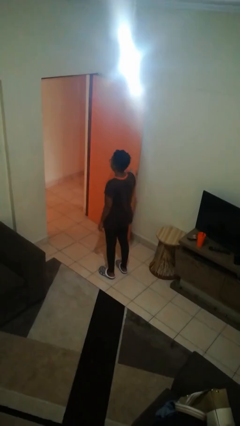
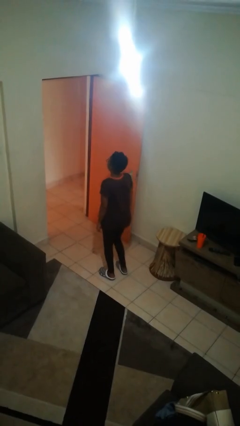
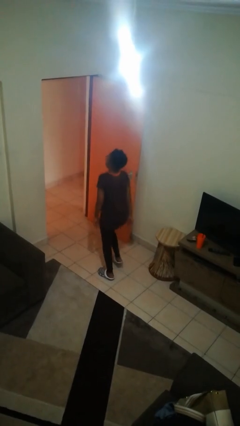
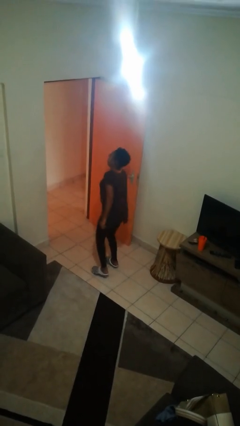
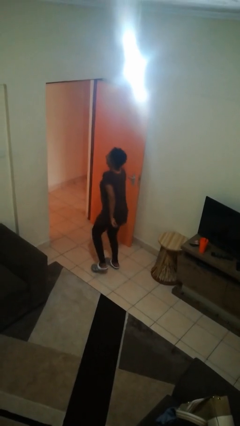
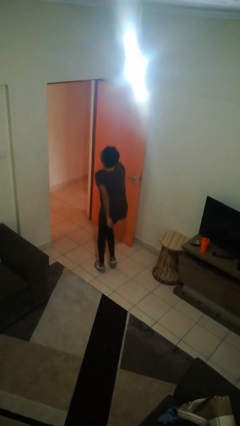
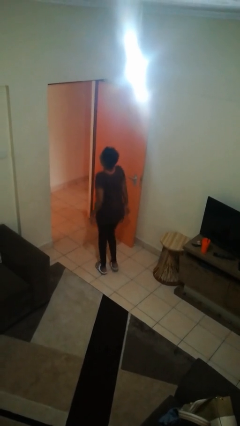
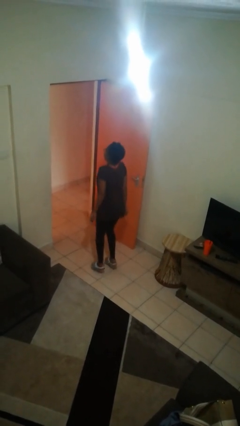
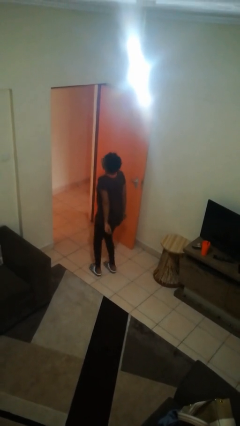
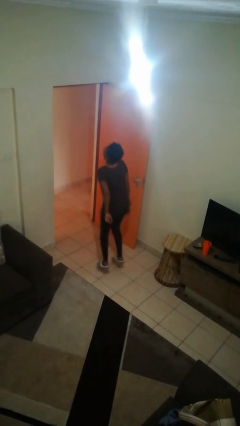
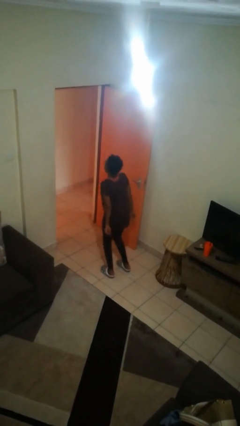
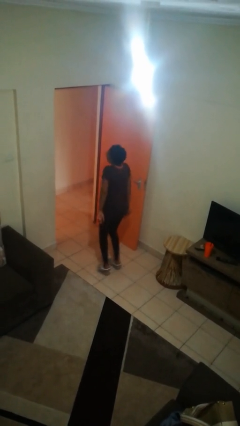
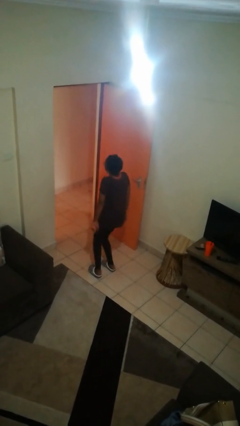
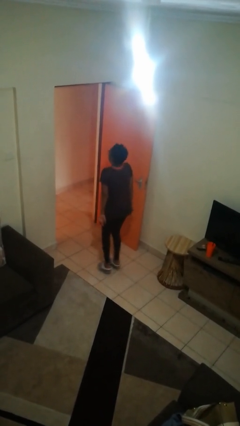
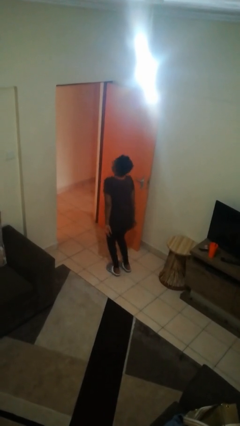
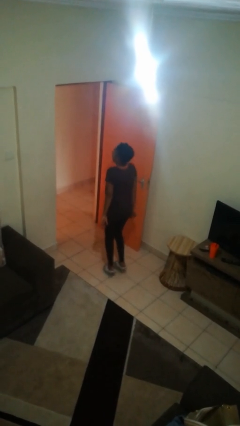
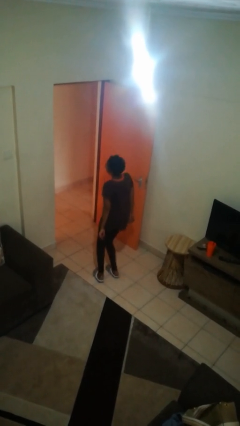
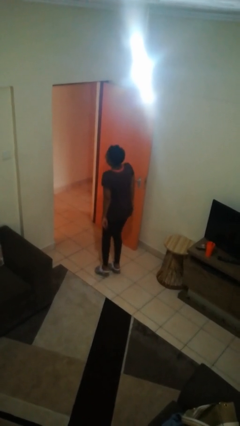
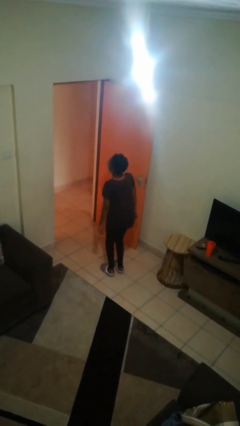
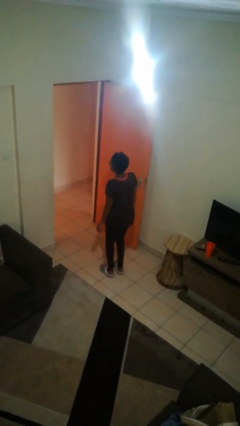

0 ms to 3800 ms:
person jumps

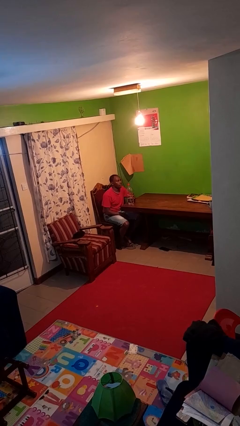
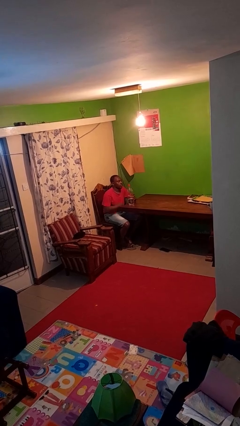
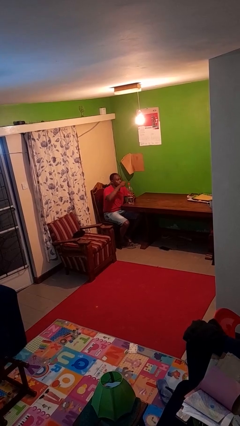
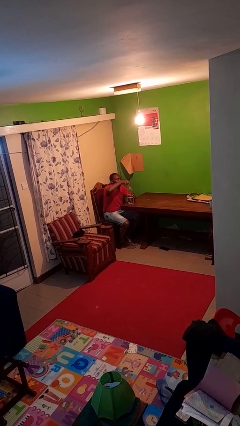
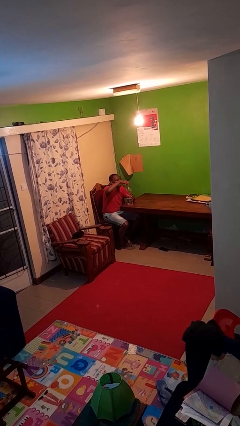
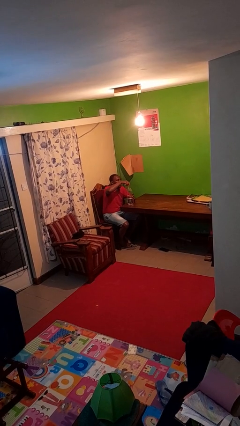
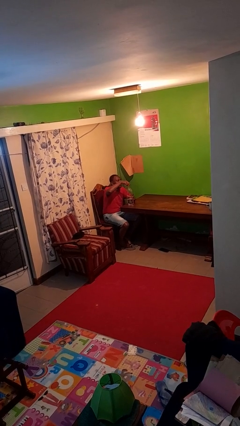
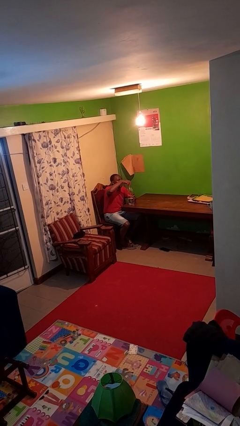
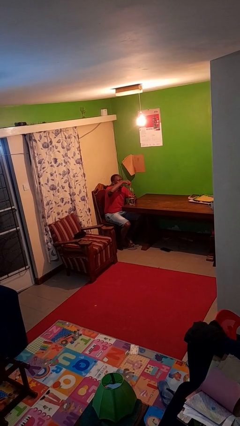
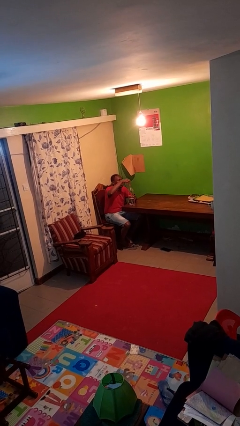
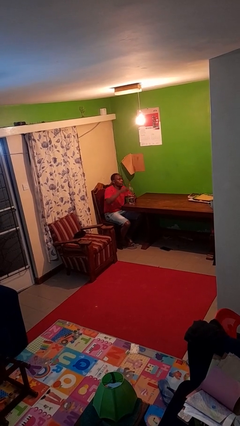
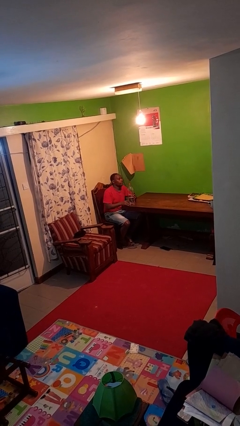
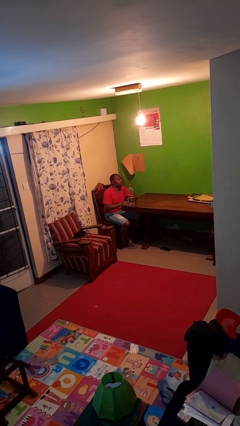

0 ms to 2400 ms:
person unscrews lid from bottle

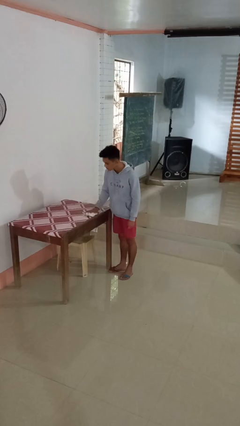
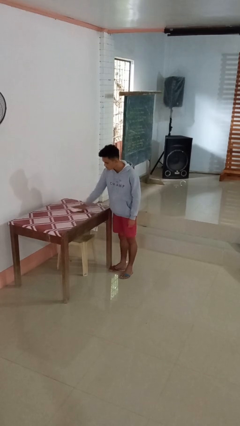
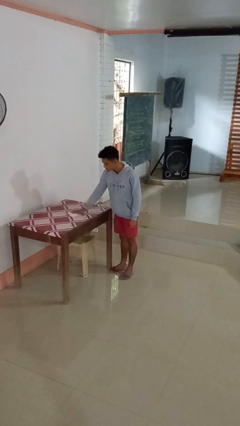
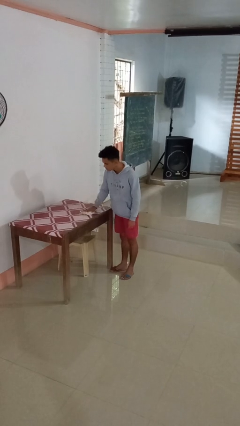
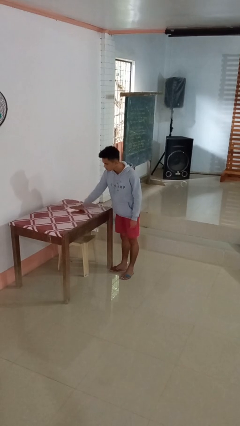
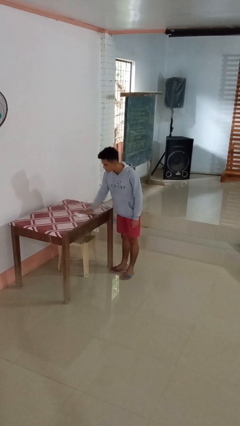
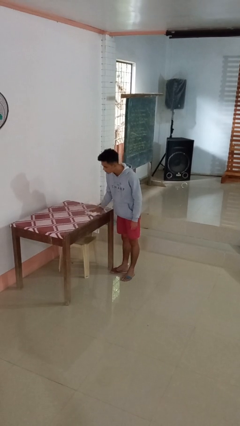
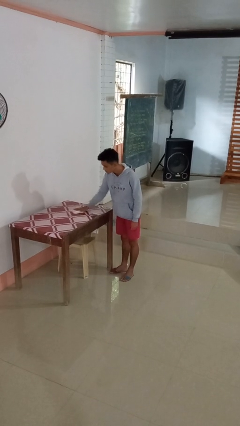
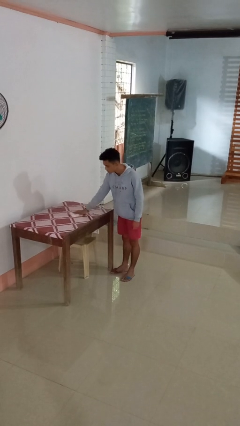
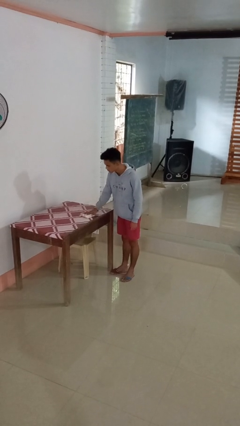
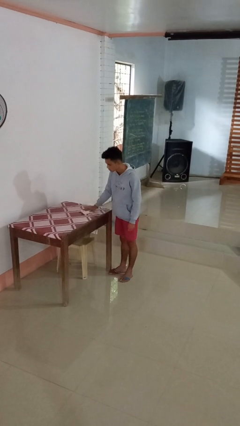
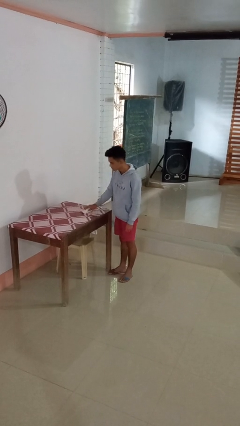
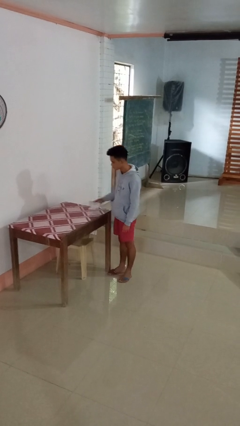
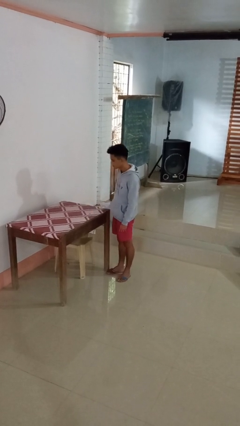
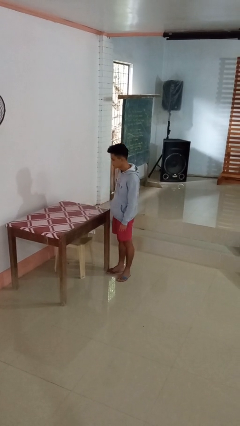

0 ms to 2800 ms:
person cleans table with rag

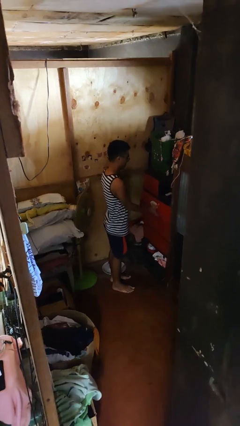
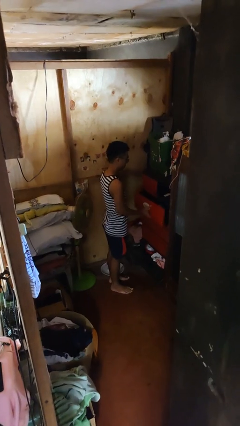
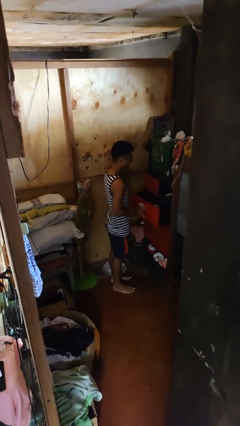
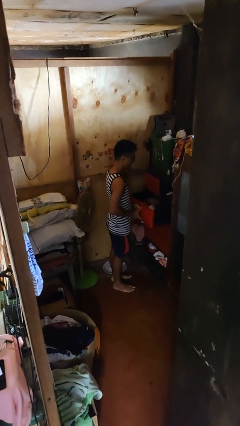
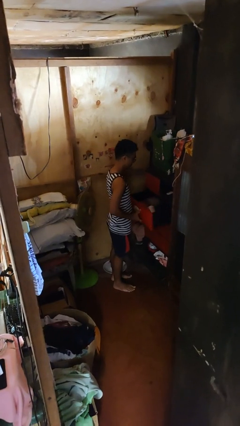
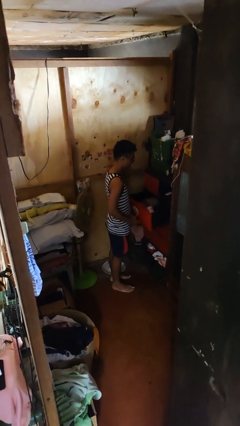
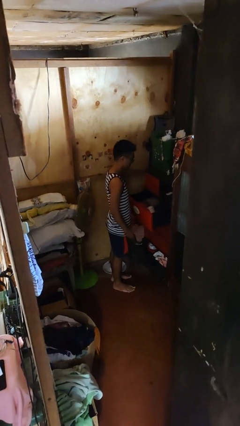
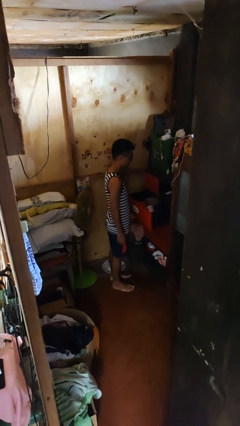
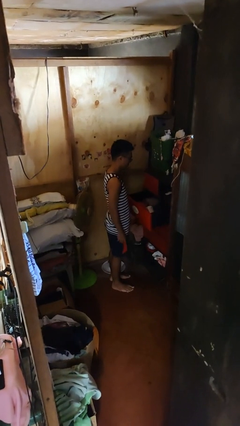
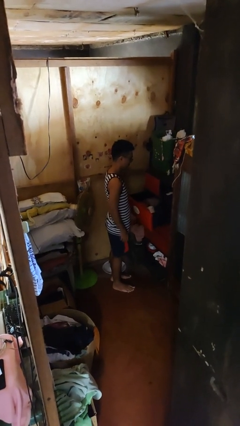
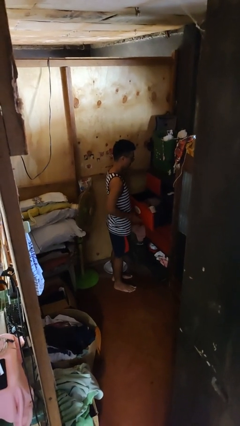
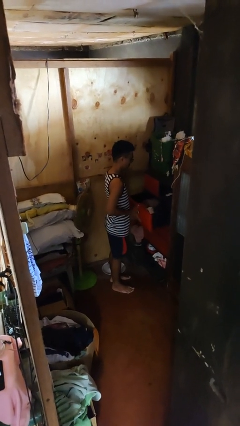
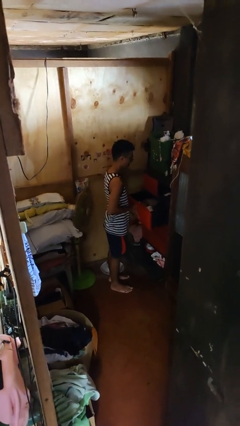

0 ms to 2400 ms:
person opens dresser drawer

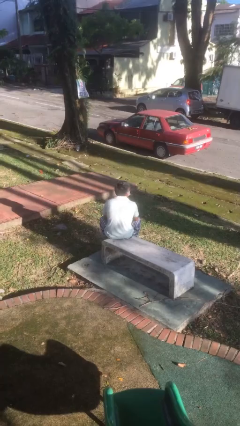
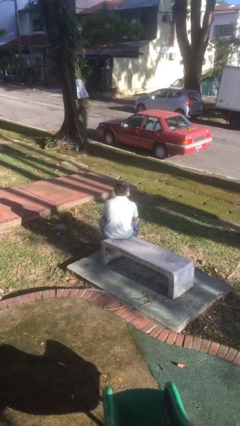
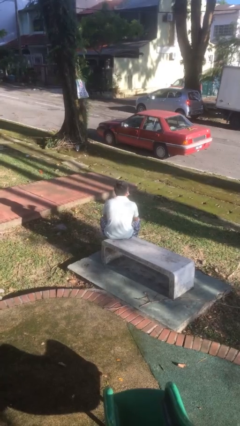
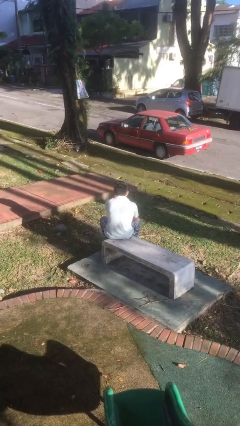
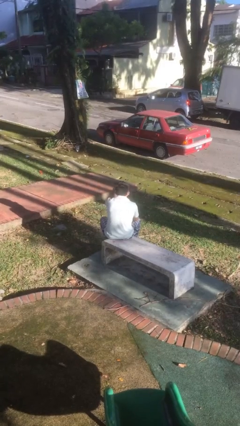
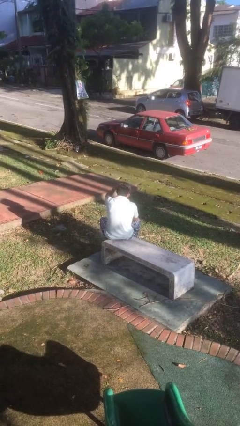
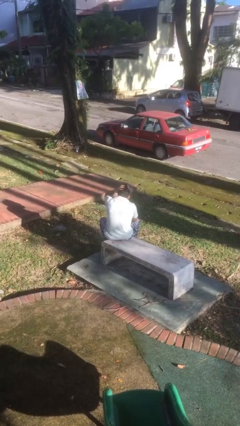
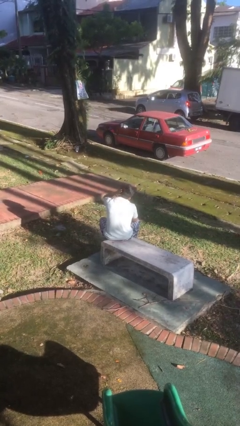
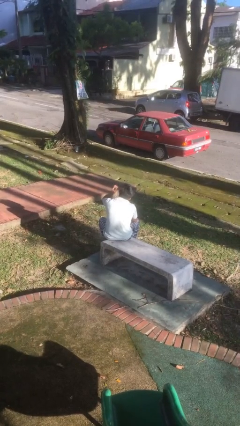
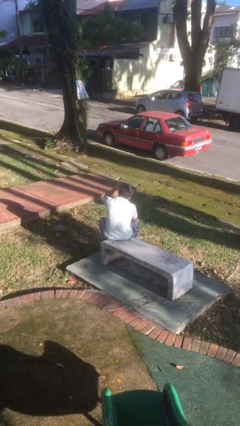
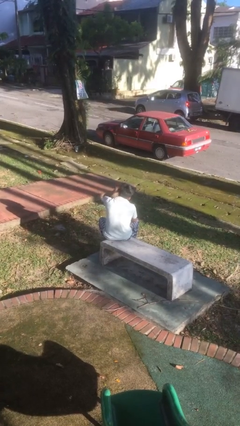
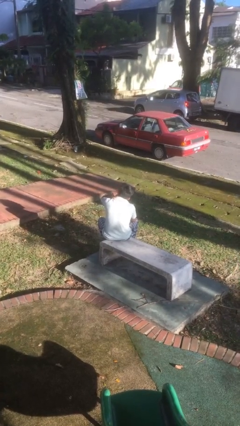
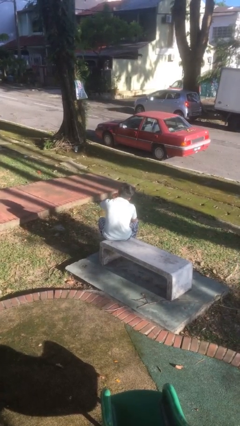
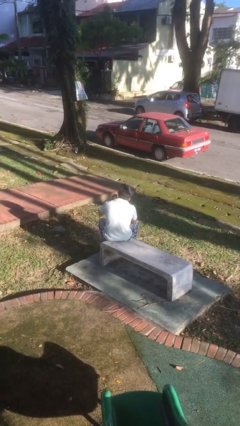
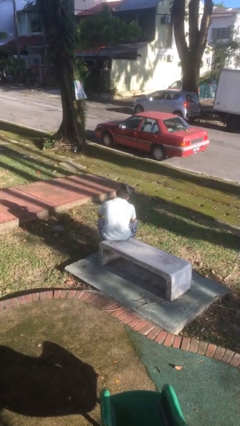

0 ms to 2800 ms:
person strokes hair

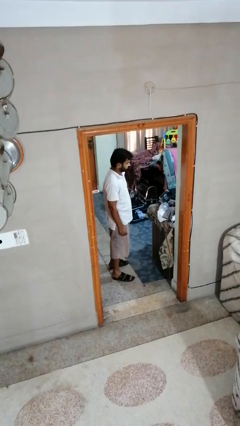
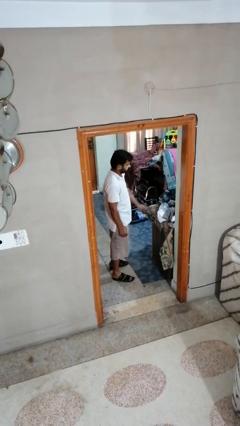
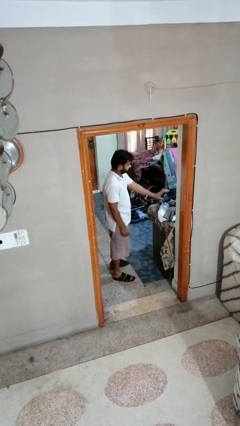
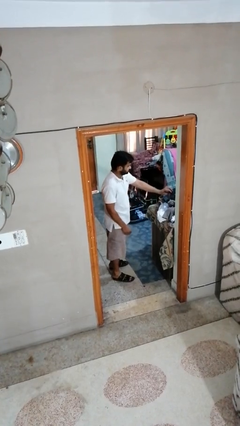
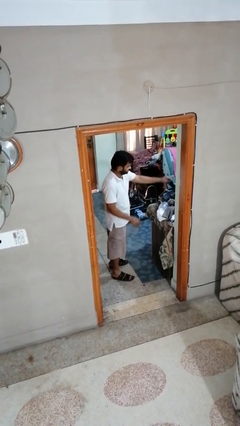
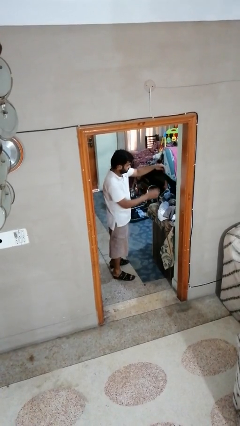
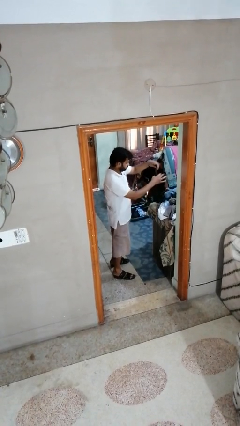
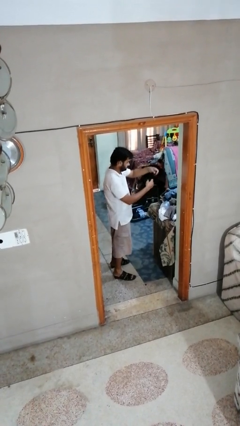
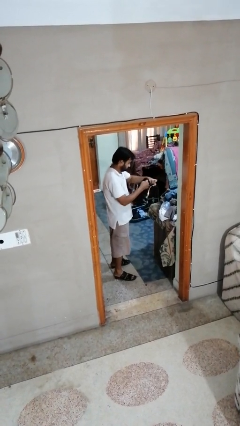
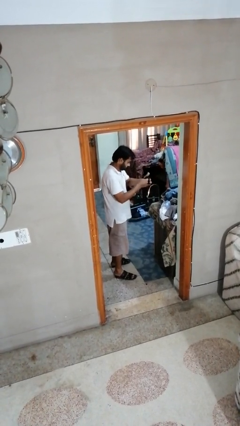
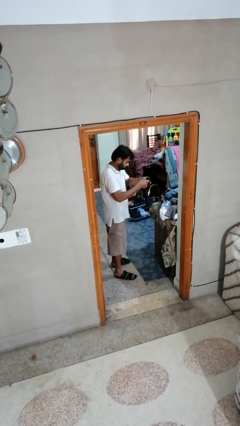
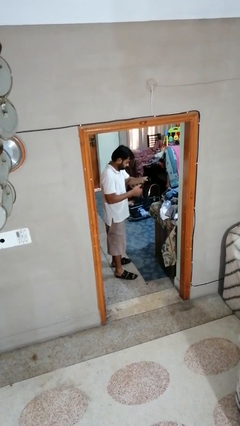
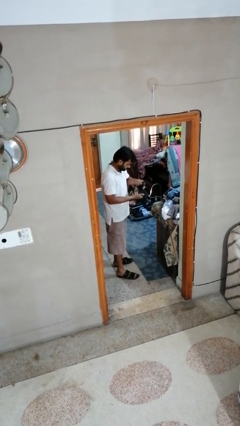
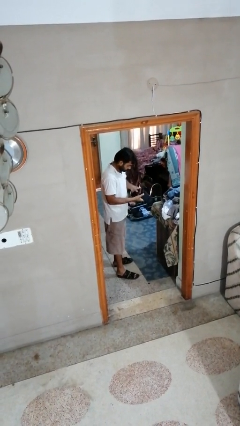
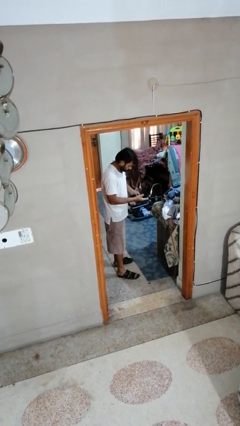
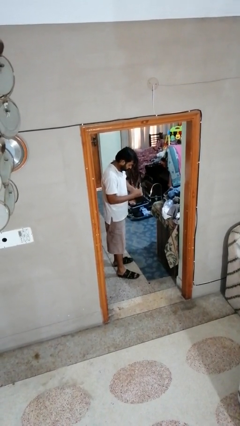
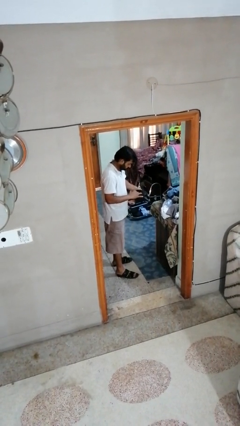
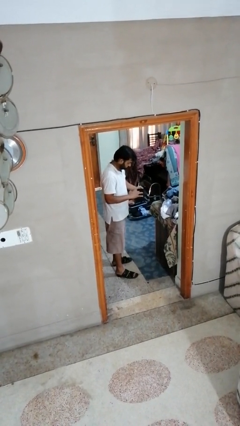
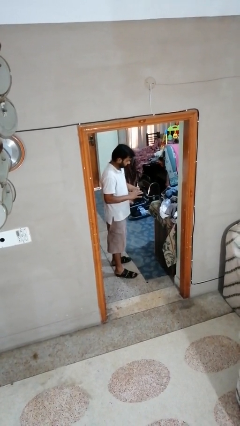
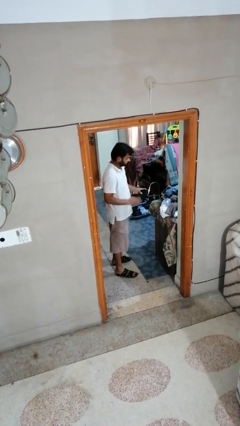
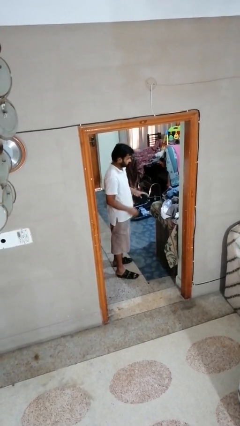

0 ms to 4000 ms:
person folds socks
